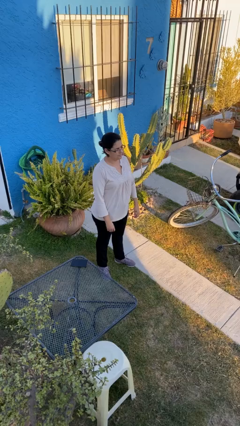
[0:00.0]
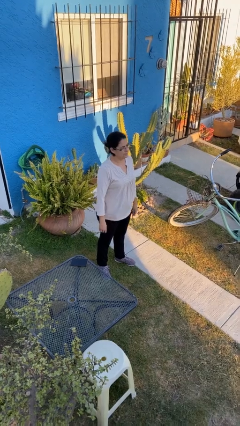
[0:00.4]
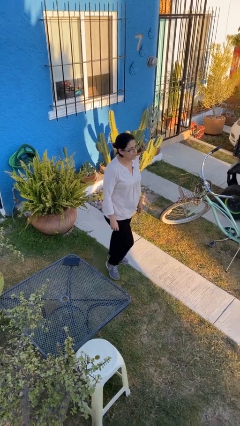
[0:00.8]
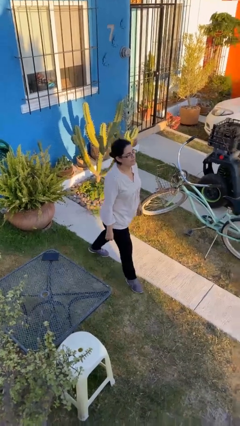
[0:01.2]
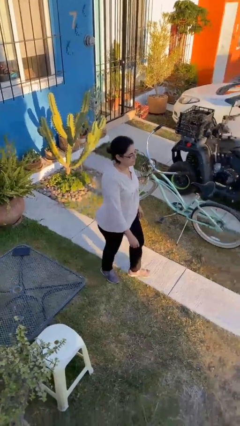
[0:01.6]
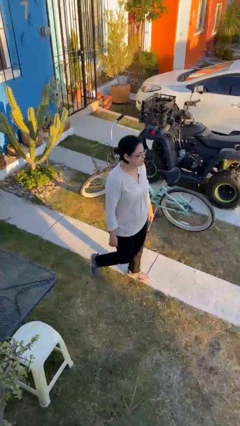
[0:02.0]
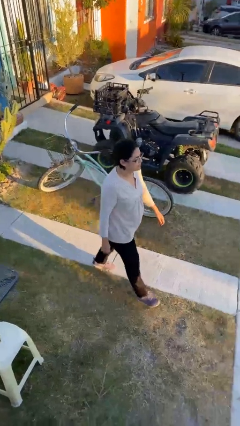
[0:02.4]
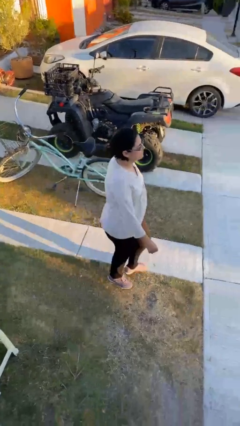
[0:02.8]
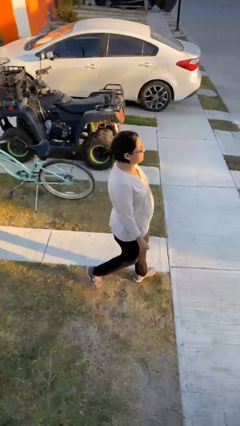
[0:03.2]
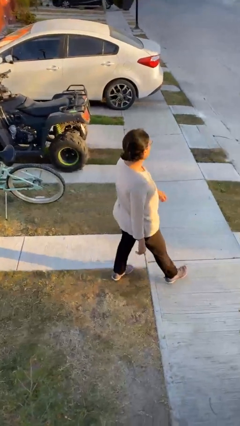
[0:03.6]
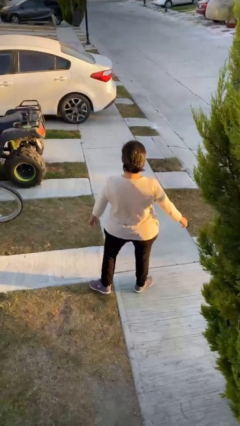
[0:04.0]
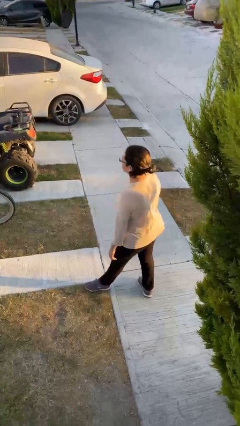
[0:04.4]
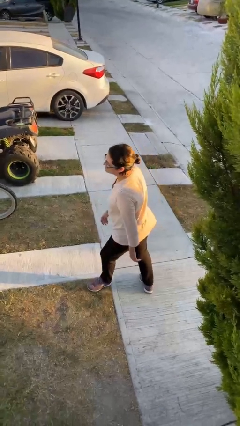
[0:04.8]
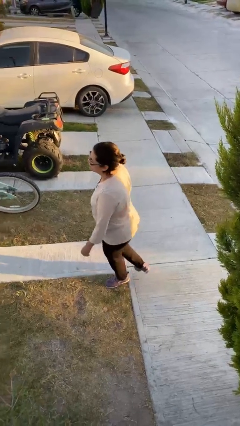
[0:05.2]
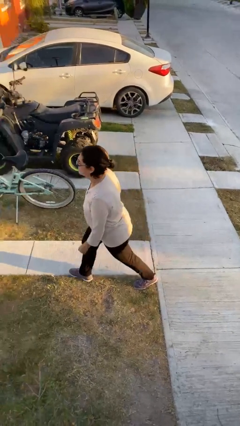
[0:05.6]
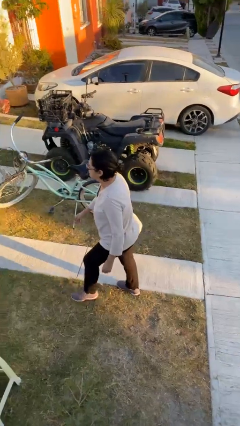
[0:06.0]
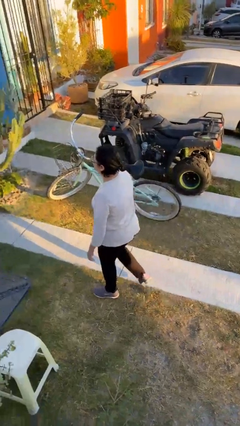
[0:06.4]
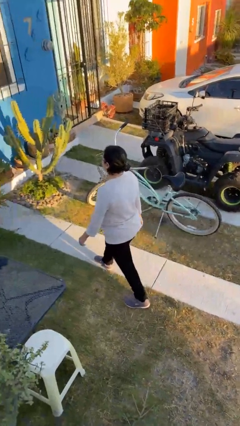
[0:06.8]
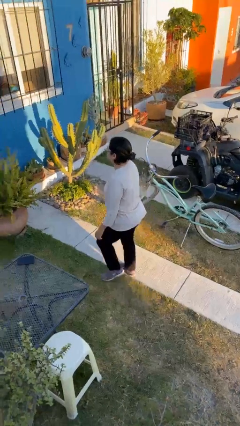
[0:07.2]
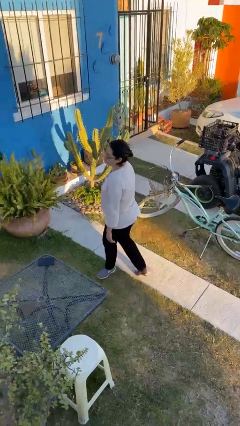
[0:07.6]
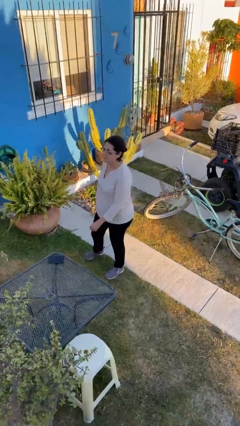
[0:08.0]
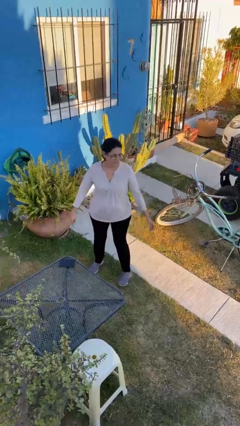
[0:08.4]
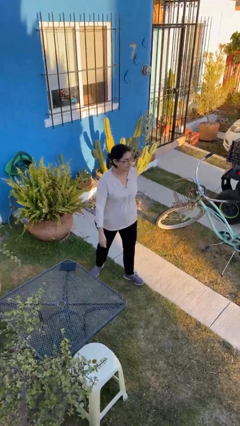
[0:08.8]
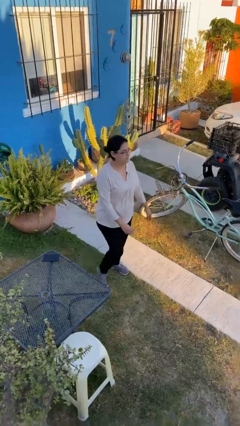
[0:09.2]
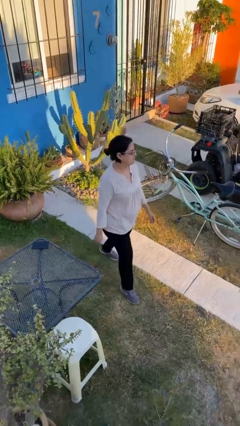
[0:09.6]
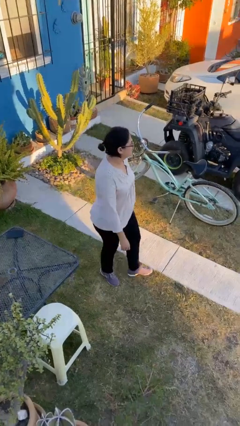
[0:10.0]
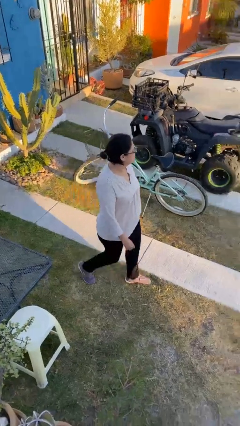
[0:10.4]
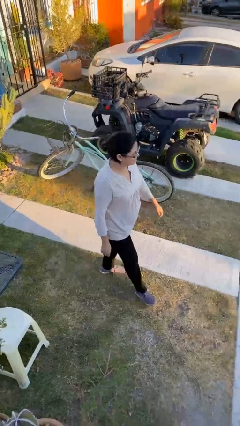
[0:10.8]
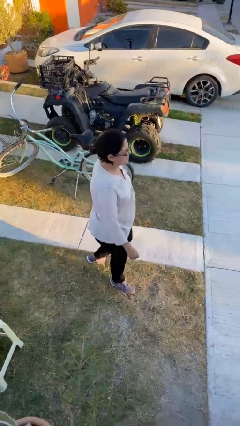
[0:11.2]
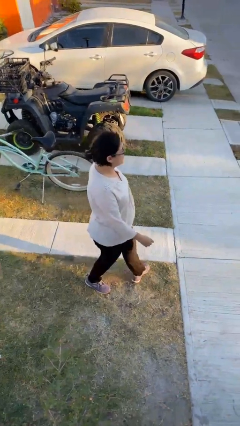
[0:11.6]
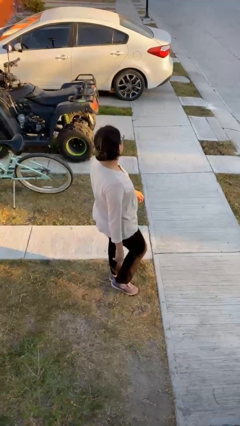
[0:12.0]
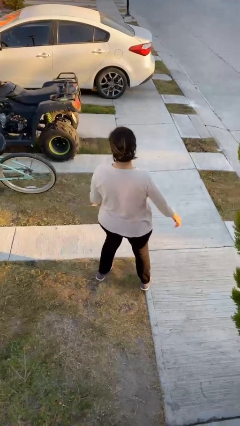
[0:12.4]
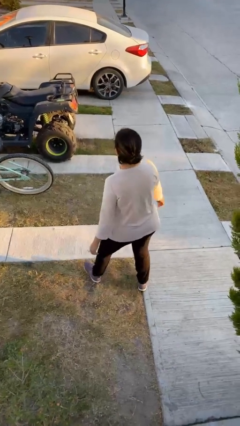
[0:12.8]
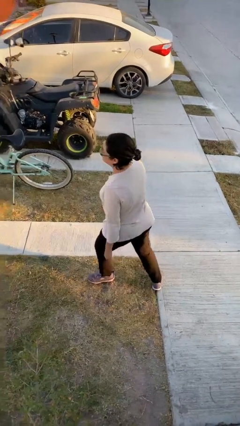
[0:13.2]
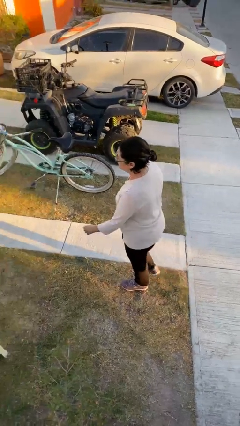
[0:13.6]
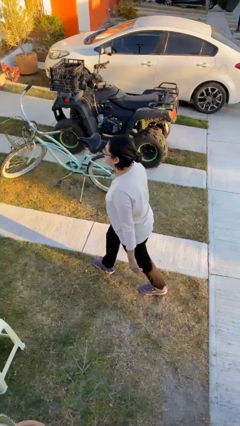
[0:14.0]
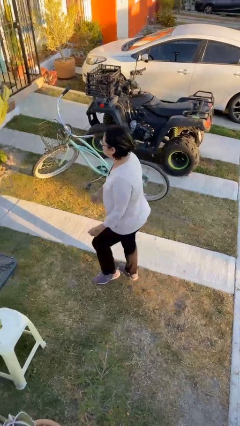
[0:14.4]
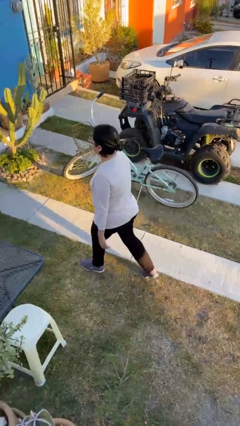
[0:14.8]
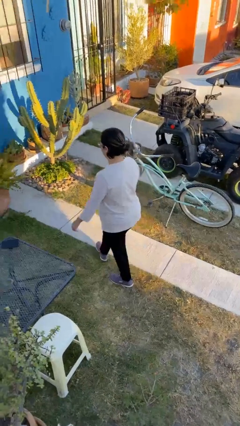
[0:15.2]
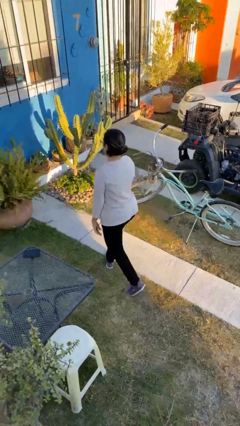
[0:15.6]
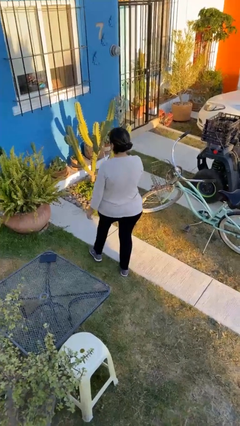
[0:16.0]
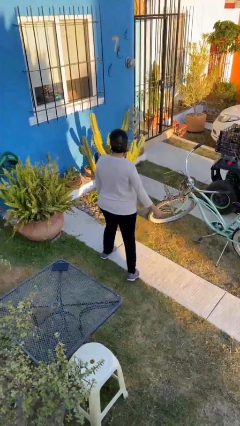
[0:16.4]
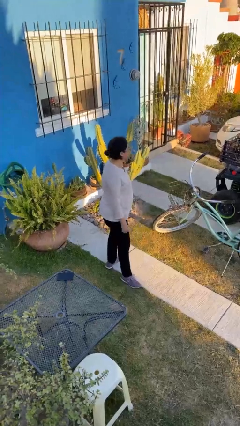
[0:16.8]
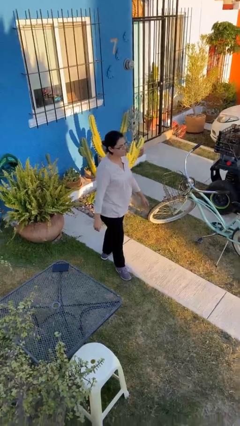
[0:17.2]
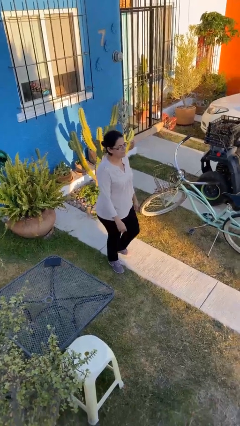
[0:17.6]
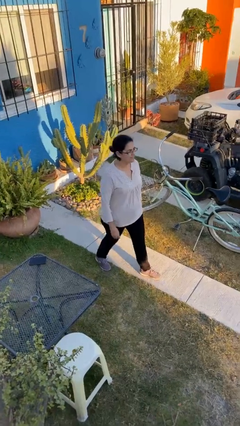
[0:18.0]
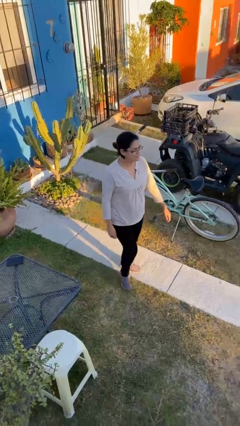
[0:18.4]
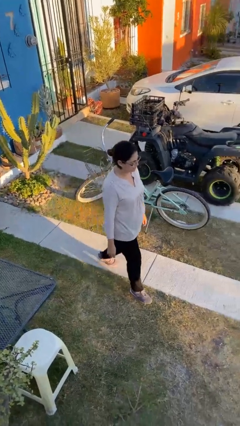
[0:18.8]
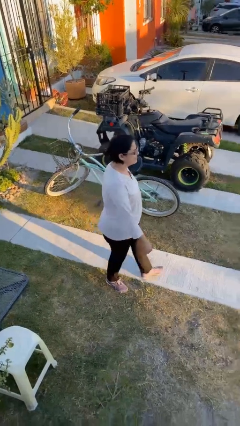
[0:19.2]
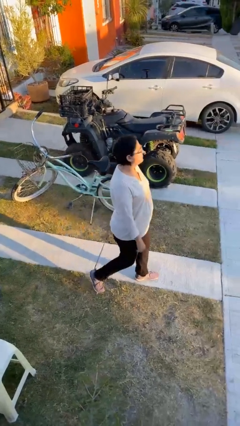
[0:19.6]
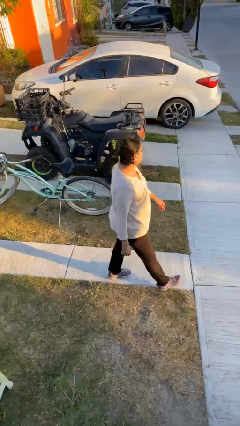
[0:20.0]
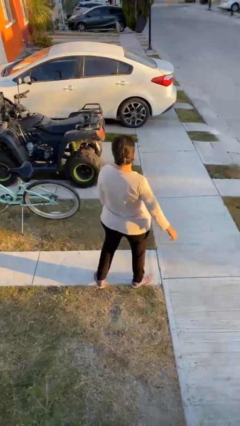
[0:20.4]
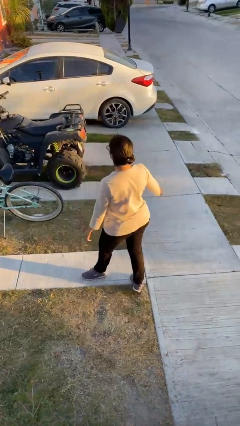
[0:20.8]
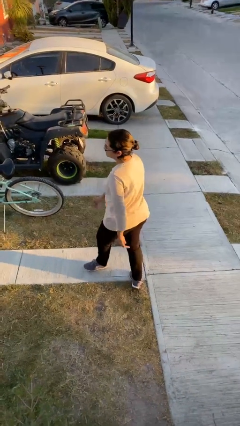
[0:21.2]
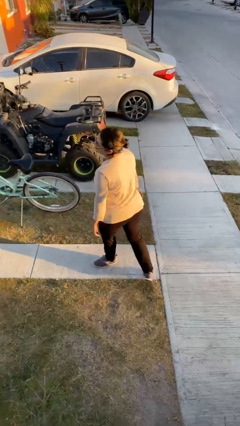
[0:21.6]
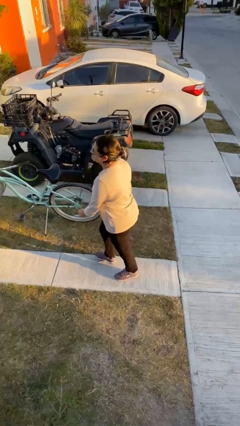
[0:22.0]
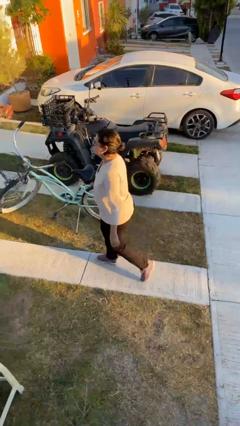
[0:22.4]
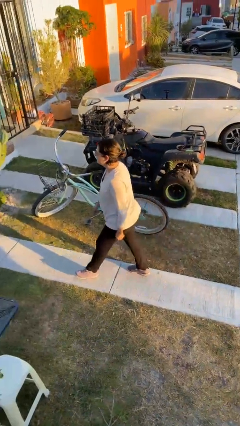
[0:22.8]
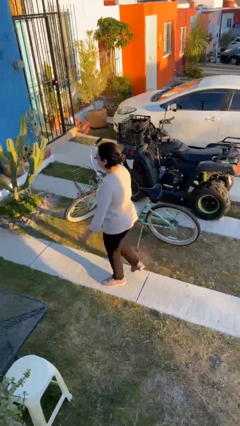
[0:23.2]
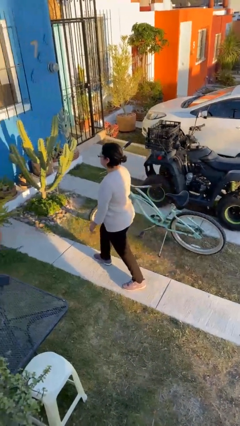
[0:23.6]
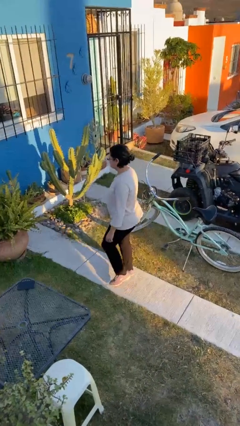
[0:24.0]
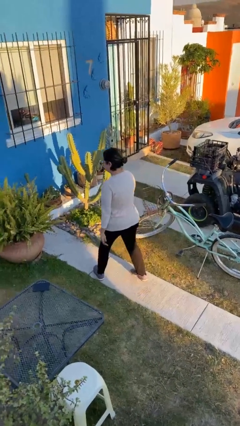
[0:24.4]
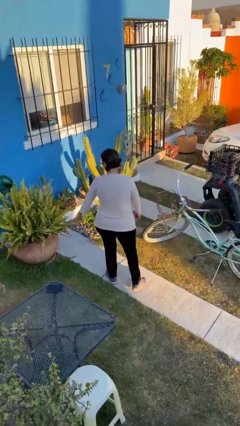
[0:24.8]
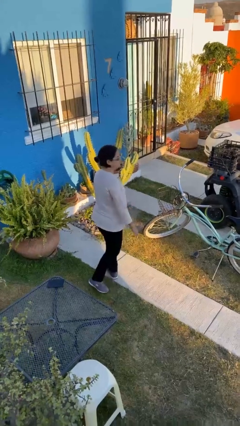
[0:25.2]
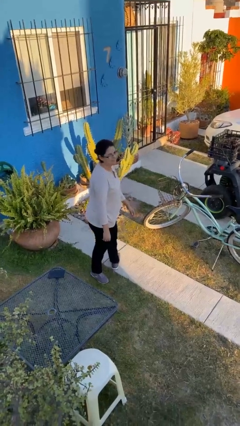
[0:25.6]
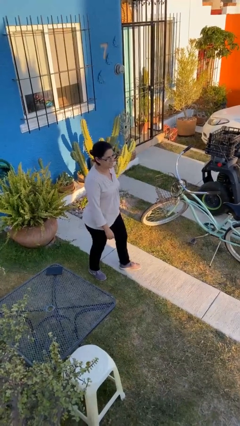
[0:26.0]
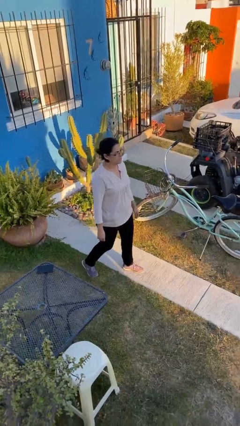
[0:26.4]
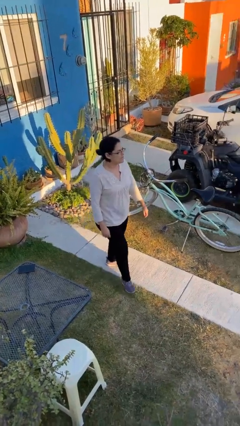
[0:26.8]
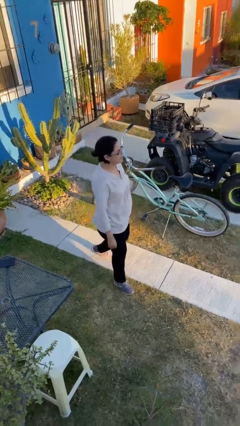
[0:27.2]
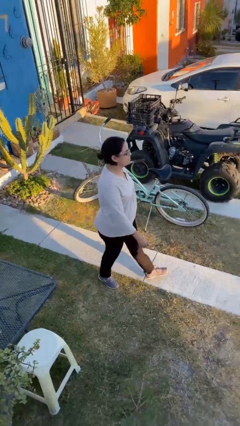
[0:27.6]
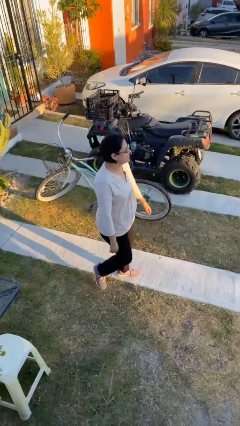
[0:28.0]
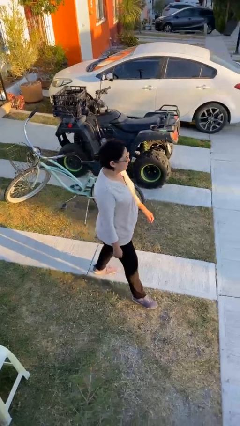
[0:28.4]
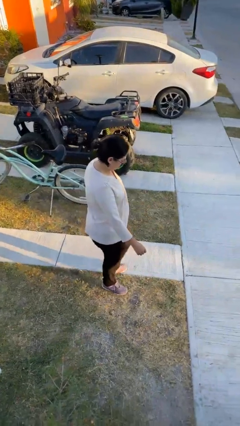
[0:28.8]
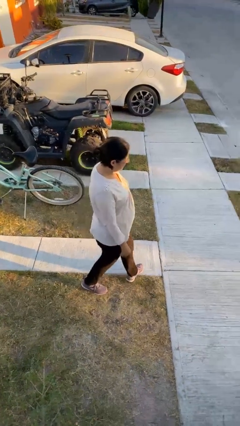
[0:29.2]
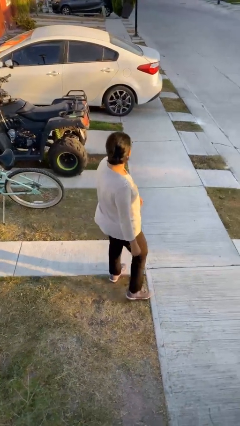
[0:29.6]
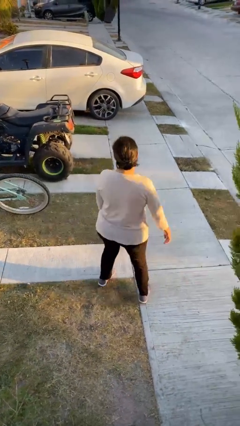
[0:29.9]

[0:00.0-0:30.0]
person walks

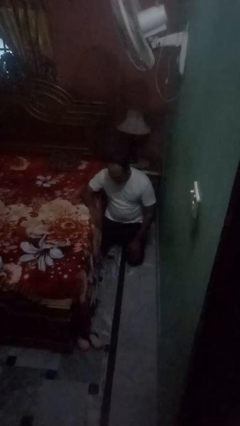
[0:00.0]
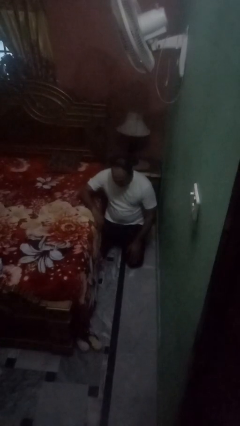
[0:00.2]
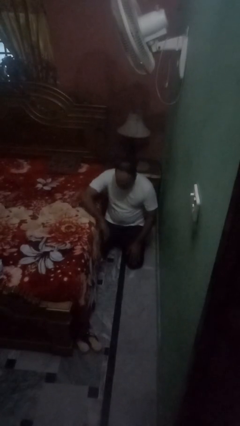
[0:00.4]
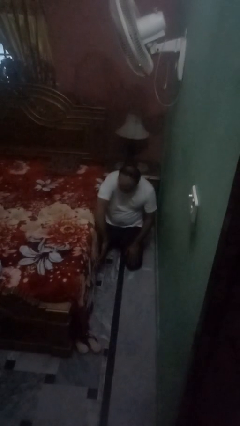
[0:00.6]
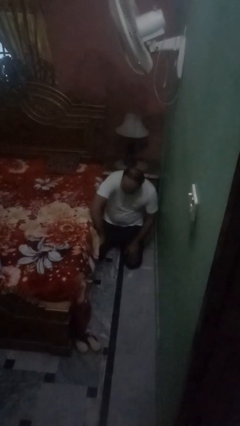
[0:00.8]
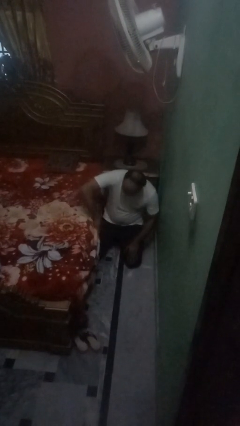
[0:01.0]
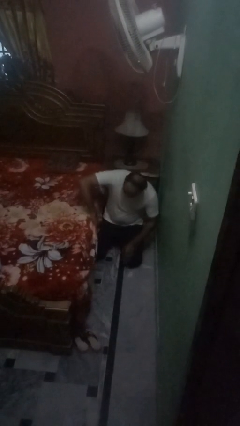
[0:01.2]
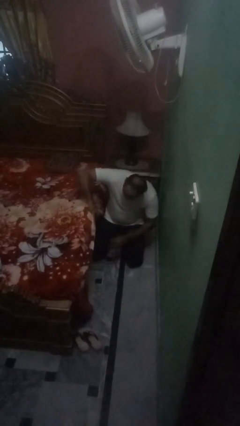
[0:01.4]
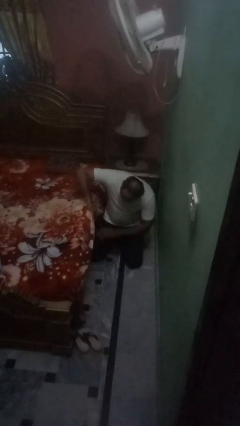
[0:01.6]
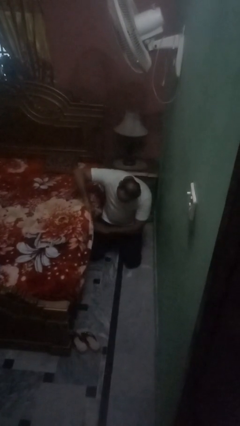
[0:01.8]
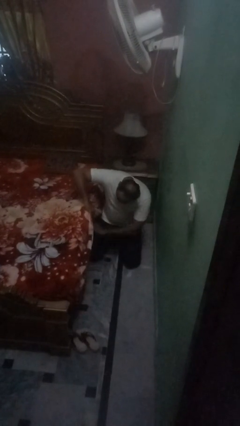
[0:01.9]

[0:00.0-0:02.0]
person searches under bed

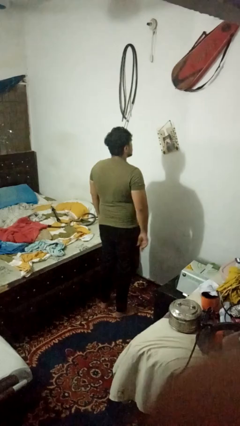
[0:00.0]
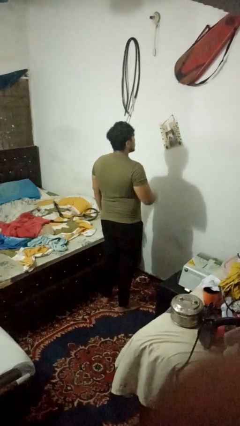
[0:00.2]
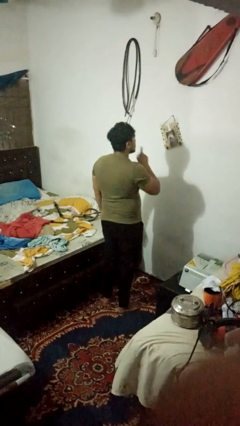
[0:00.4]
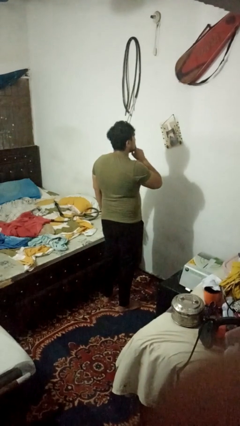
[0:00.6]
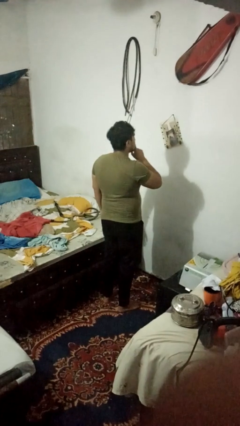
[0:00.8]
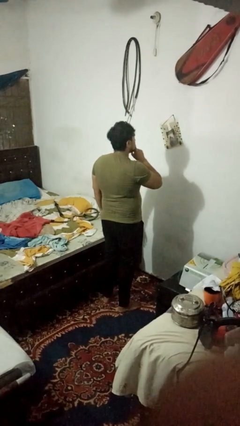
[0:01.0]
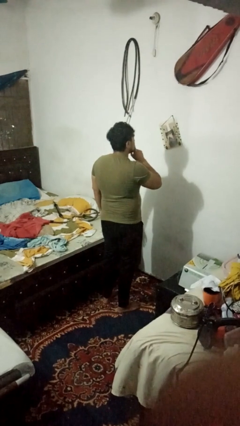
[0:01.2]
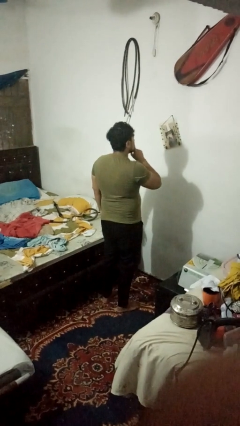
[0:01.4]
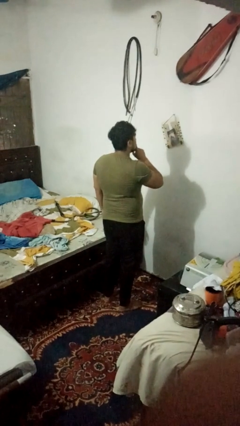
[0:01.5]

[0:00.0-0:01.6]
person gestures be quiet
